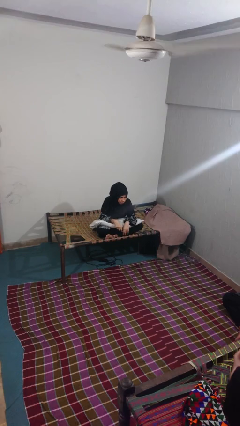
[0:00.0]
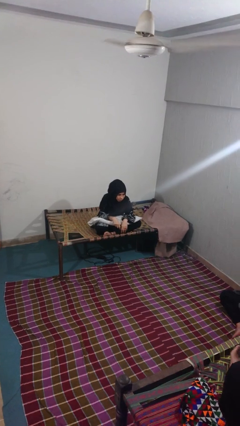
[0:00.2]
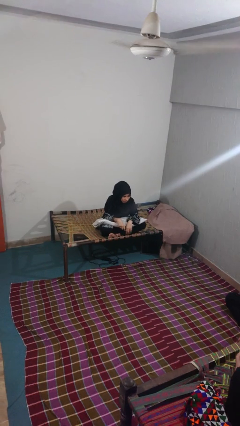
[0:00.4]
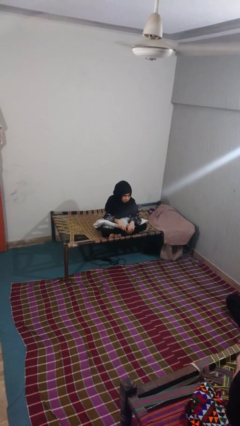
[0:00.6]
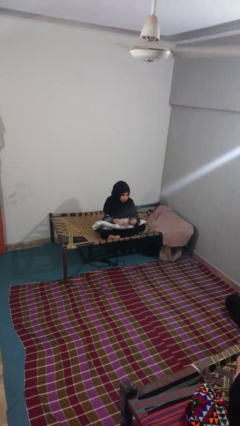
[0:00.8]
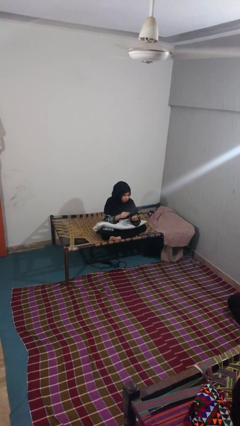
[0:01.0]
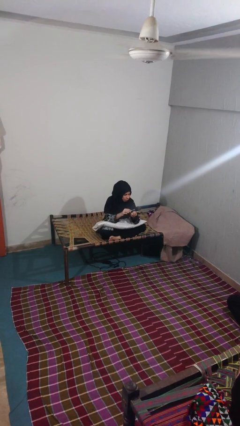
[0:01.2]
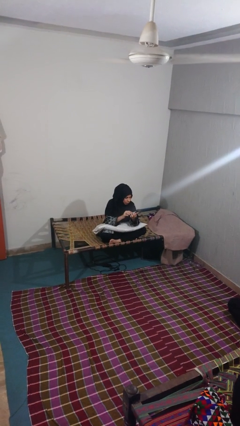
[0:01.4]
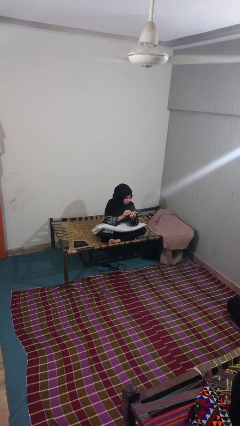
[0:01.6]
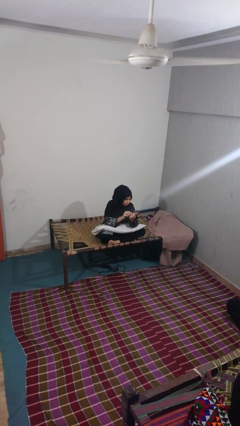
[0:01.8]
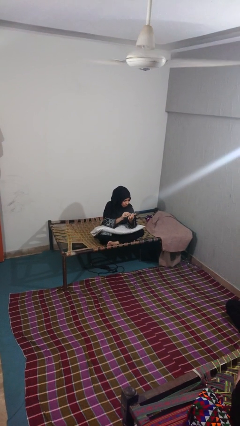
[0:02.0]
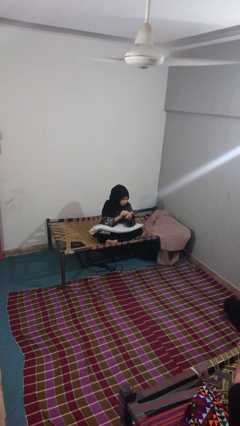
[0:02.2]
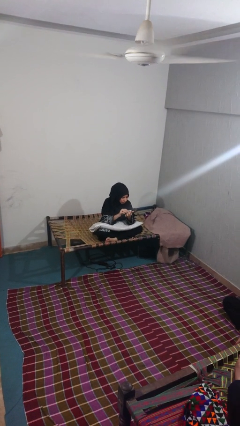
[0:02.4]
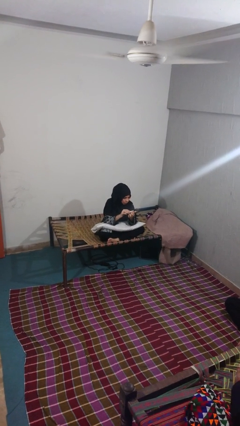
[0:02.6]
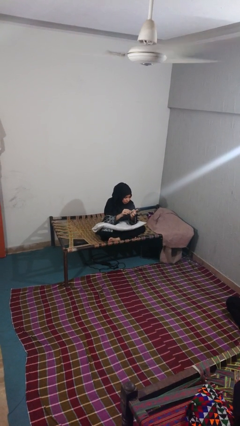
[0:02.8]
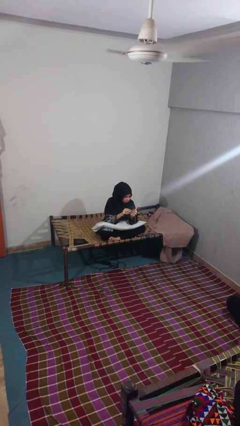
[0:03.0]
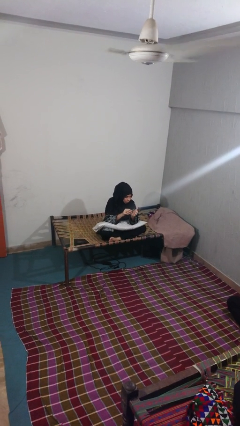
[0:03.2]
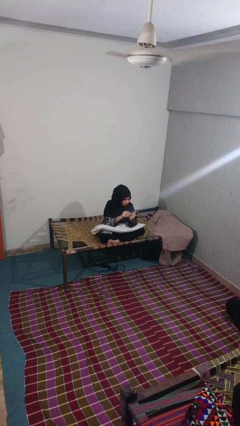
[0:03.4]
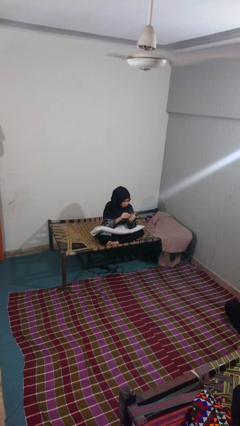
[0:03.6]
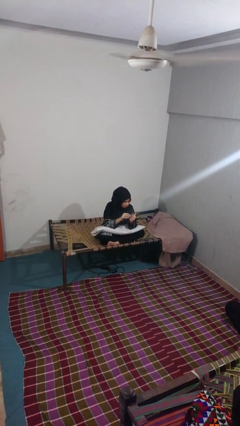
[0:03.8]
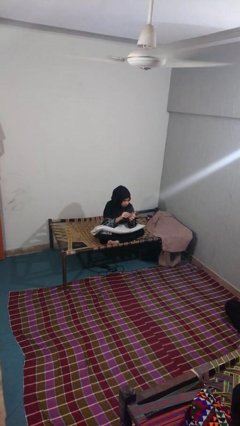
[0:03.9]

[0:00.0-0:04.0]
person files fingernails

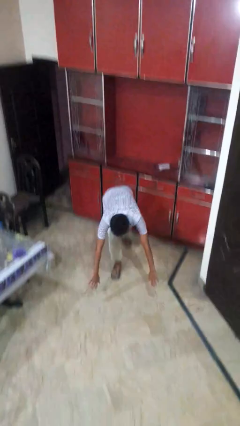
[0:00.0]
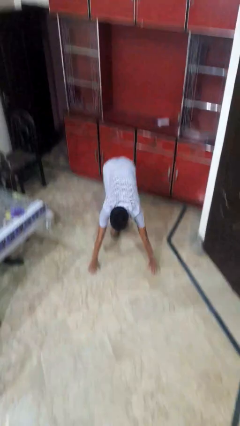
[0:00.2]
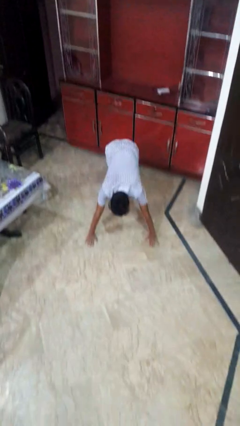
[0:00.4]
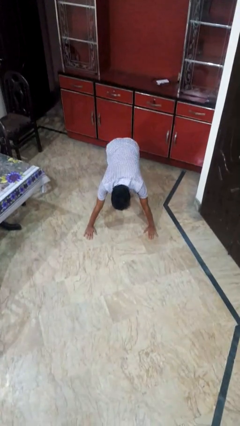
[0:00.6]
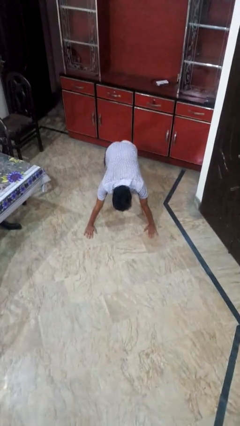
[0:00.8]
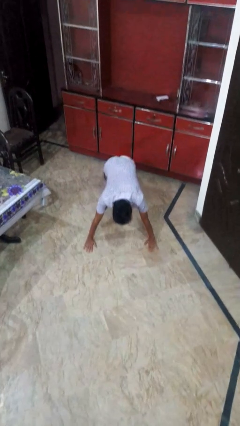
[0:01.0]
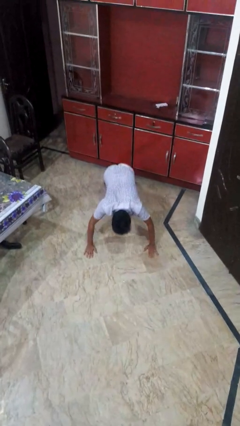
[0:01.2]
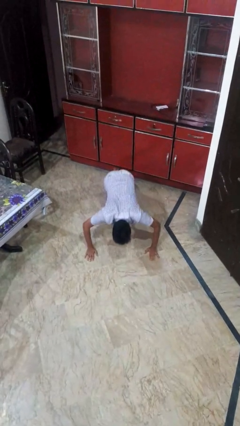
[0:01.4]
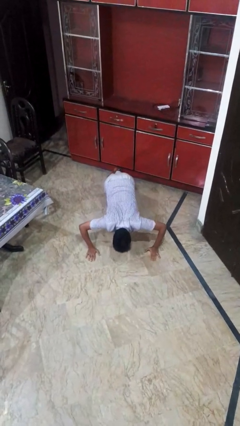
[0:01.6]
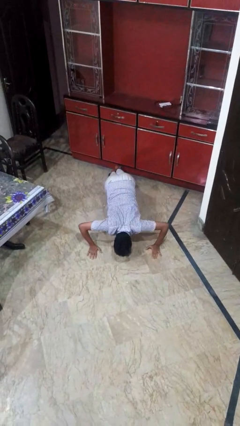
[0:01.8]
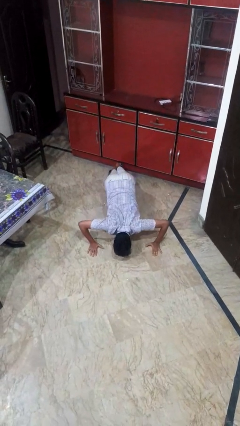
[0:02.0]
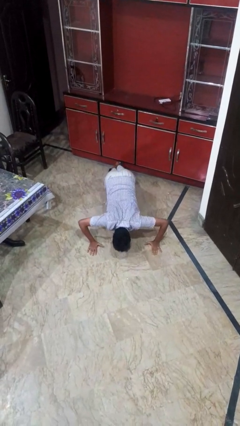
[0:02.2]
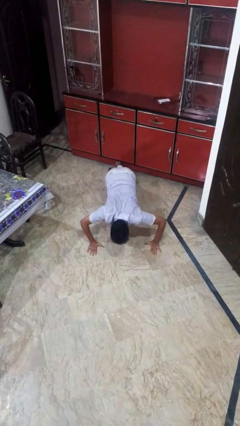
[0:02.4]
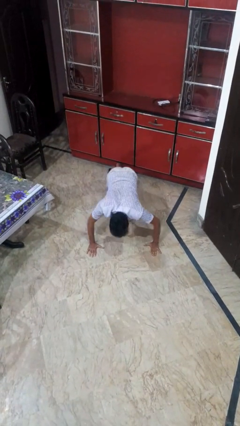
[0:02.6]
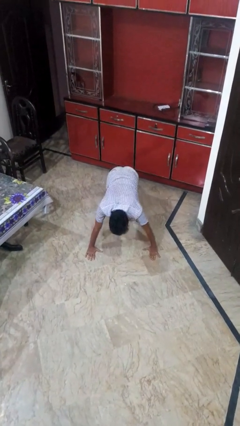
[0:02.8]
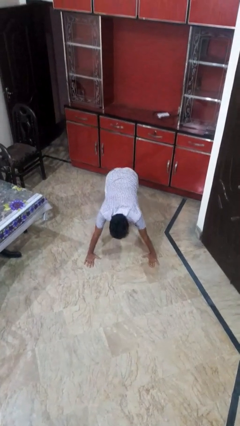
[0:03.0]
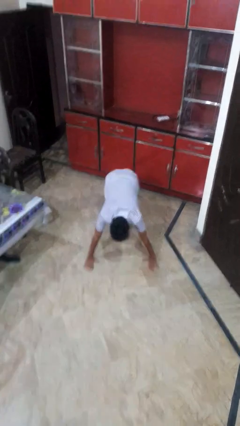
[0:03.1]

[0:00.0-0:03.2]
person exercises with pushup

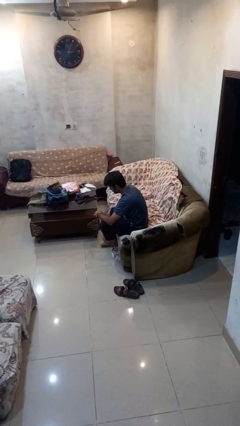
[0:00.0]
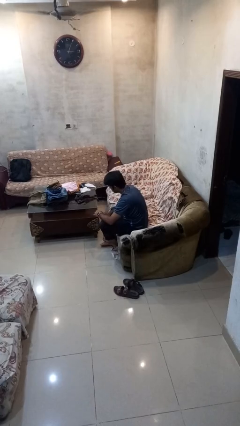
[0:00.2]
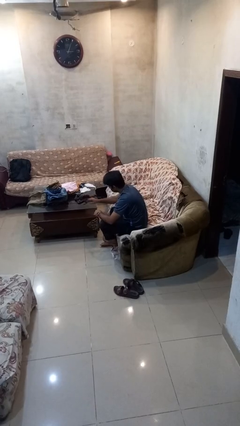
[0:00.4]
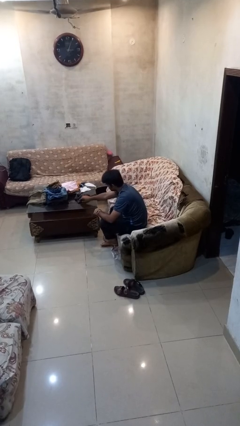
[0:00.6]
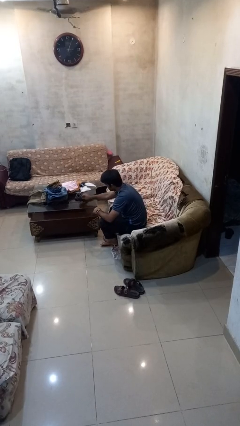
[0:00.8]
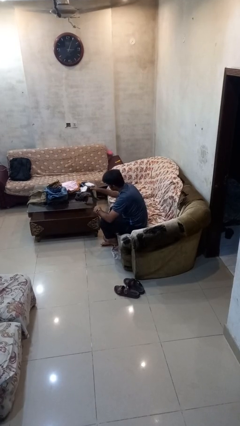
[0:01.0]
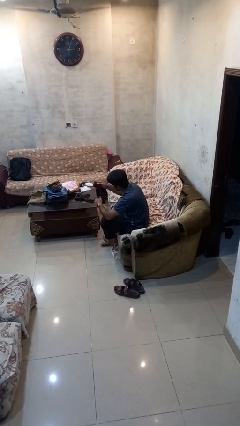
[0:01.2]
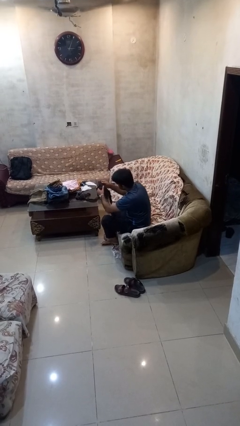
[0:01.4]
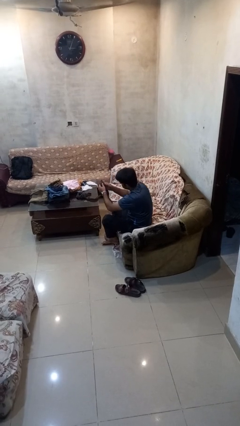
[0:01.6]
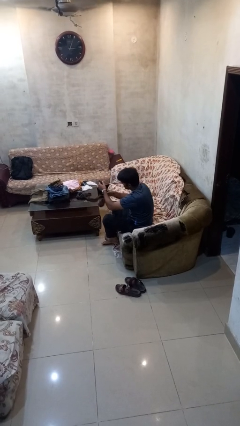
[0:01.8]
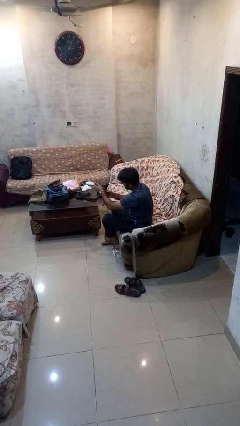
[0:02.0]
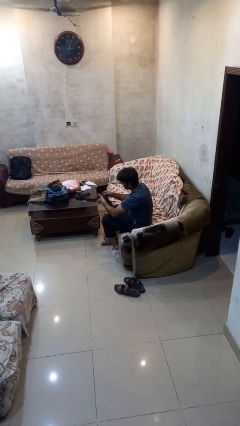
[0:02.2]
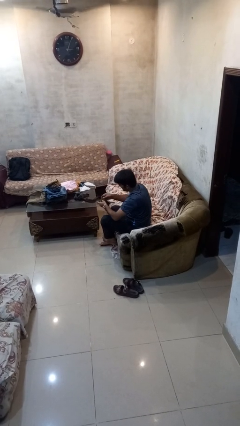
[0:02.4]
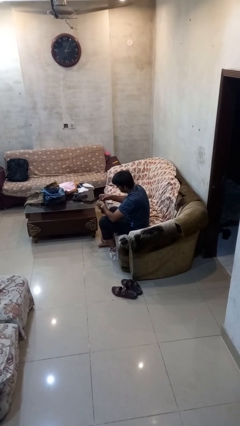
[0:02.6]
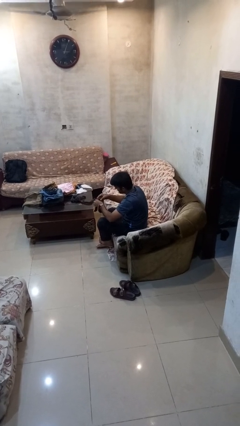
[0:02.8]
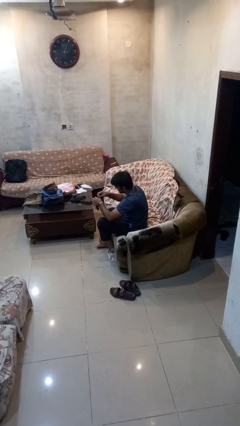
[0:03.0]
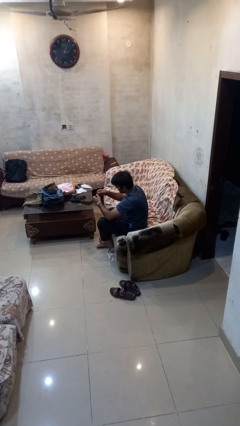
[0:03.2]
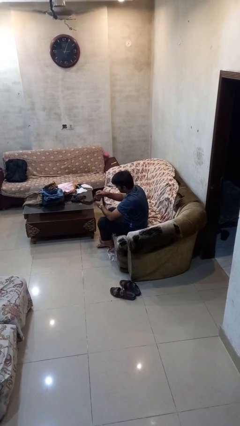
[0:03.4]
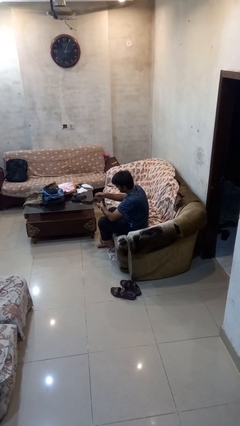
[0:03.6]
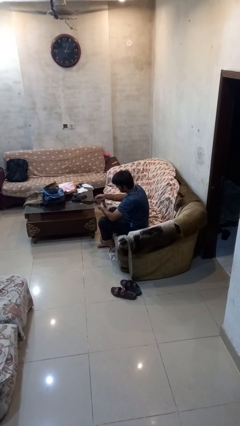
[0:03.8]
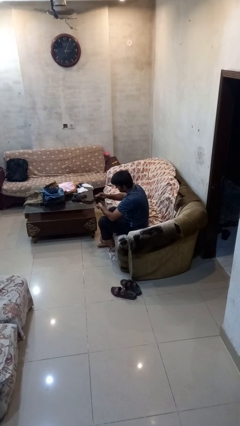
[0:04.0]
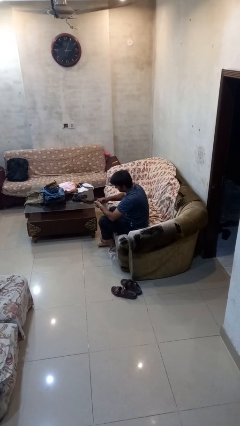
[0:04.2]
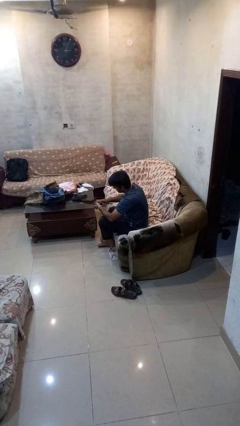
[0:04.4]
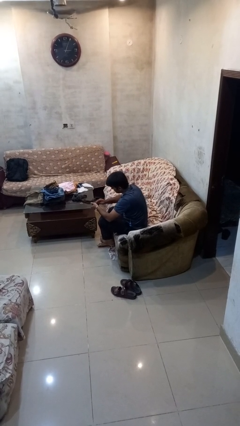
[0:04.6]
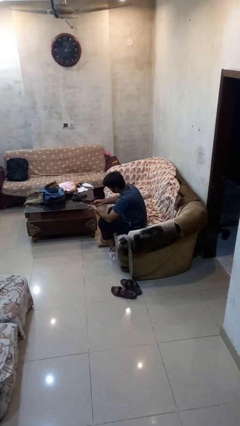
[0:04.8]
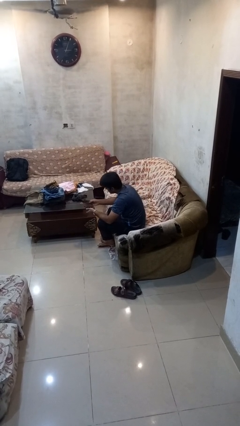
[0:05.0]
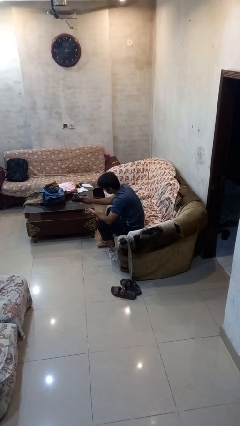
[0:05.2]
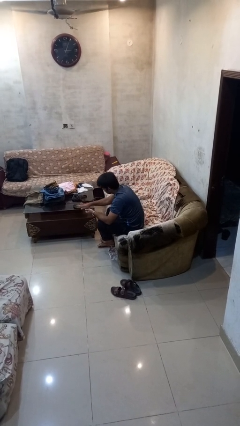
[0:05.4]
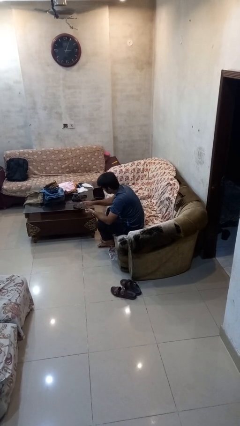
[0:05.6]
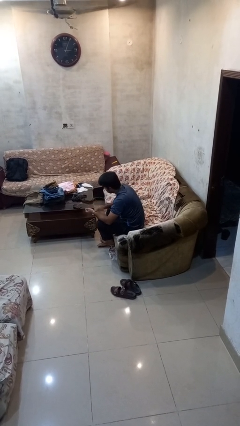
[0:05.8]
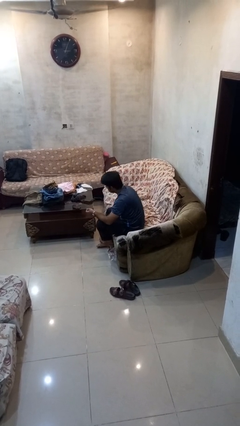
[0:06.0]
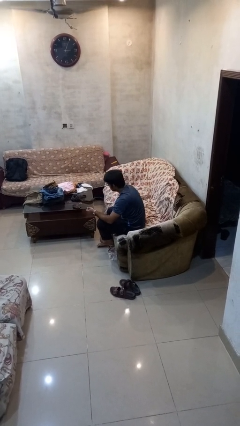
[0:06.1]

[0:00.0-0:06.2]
person folds socks

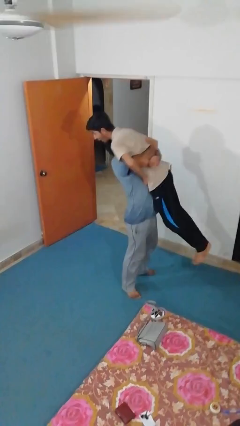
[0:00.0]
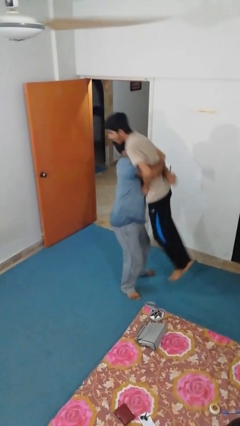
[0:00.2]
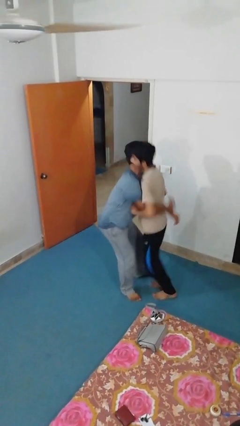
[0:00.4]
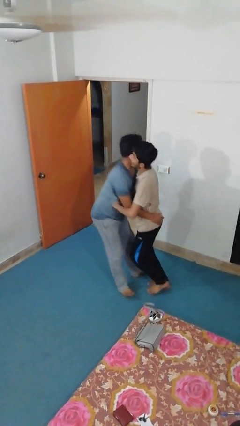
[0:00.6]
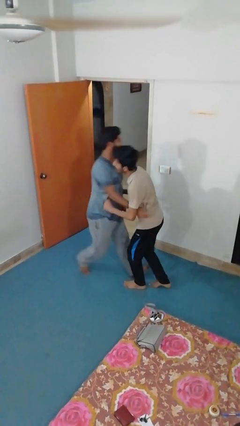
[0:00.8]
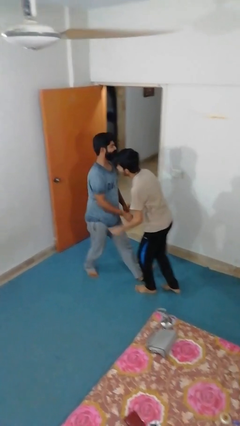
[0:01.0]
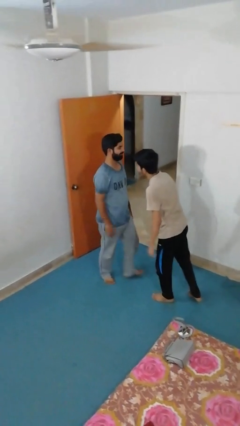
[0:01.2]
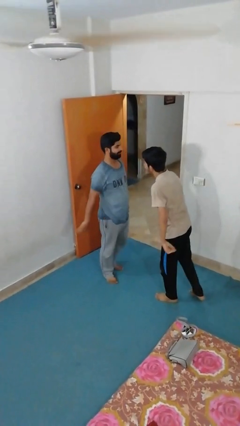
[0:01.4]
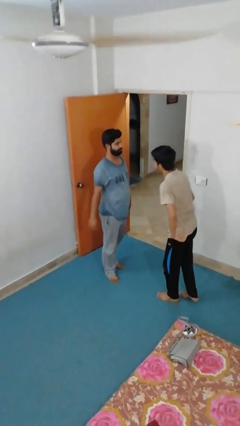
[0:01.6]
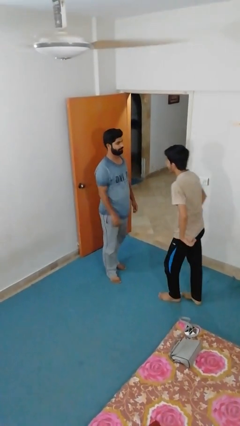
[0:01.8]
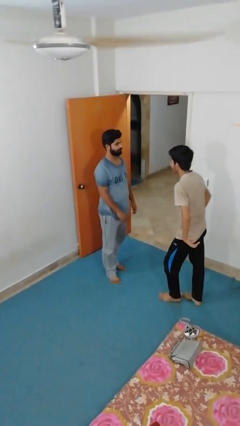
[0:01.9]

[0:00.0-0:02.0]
person puts down person

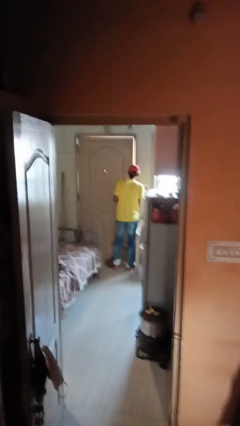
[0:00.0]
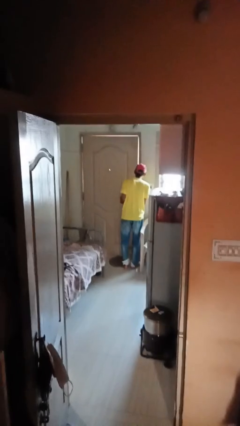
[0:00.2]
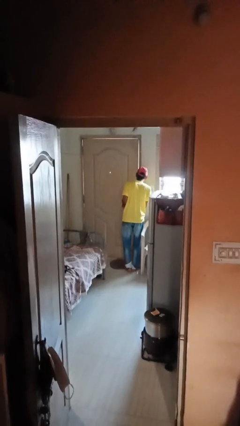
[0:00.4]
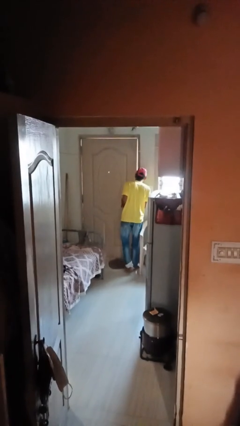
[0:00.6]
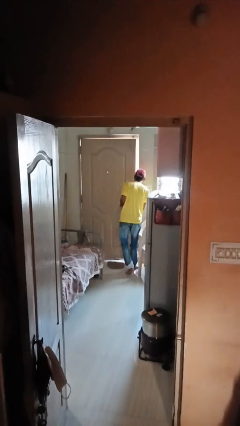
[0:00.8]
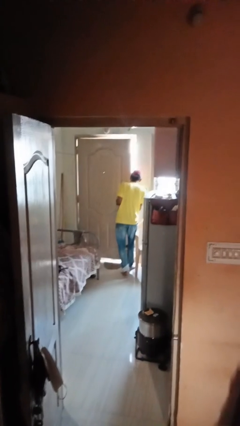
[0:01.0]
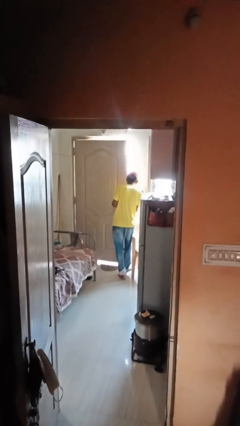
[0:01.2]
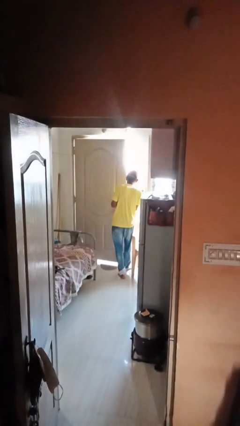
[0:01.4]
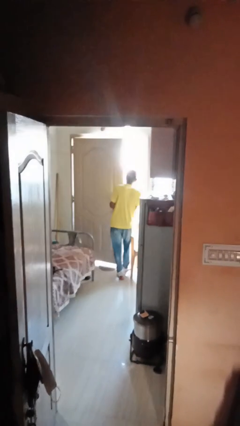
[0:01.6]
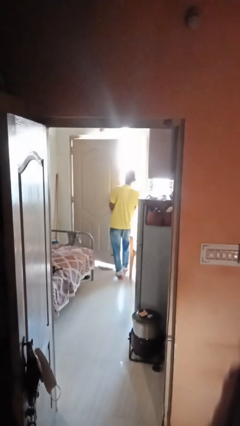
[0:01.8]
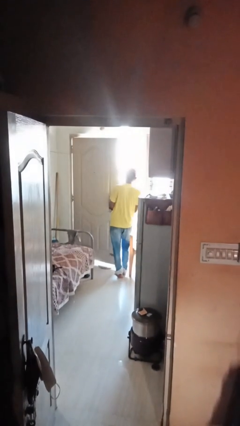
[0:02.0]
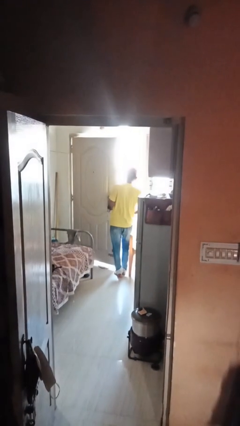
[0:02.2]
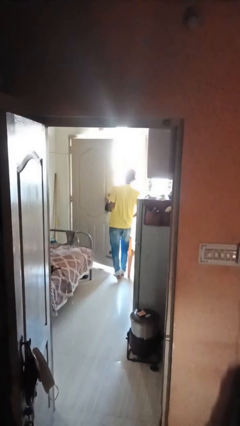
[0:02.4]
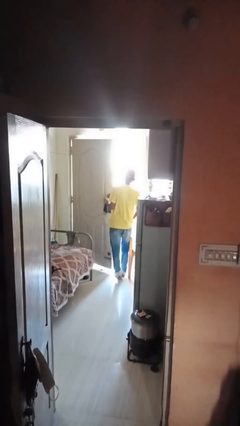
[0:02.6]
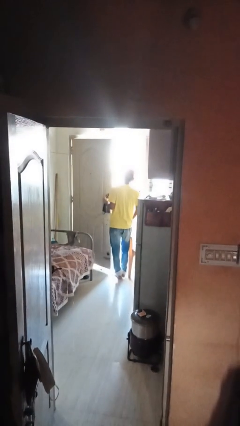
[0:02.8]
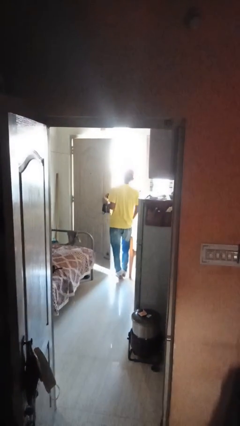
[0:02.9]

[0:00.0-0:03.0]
person opens facility door
